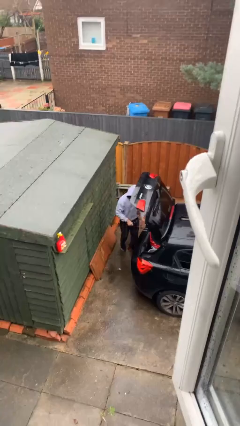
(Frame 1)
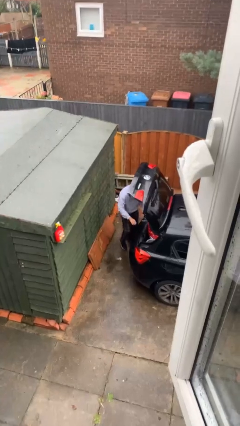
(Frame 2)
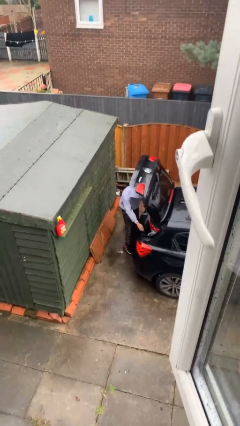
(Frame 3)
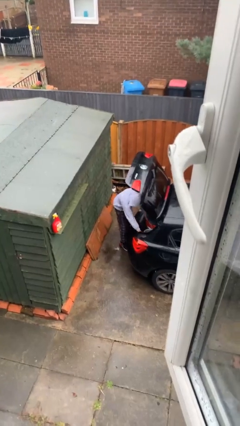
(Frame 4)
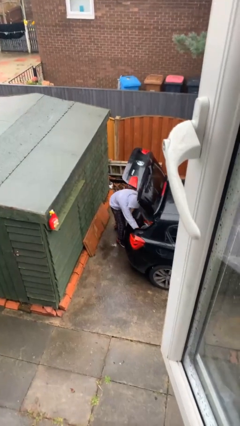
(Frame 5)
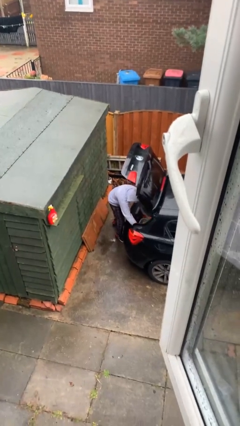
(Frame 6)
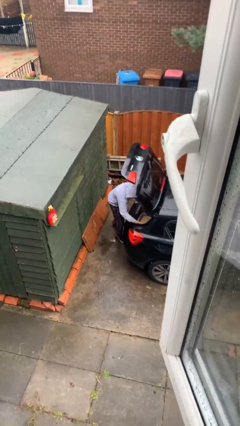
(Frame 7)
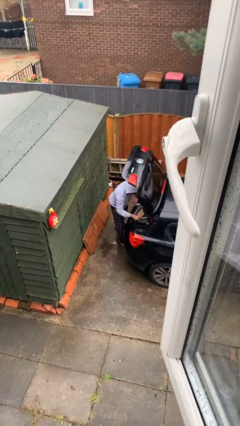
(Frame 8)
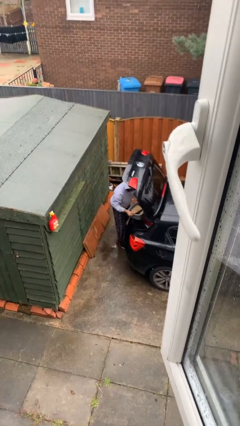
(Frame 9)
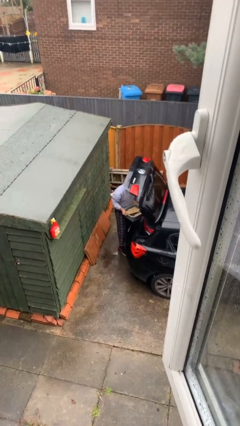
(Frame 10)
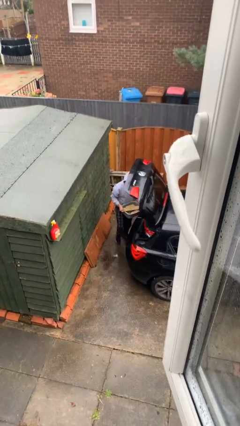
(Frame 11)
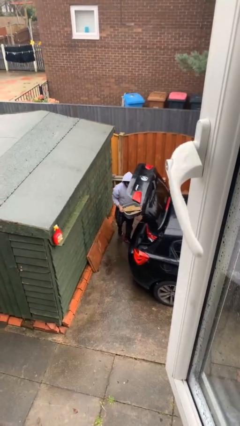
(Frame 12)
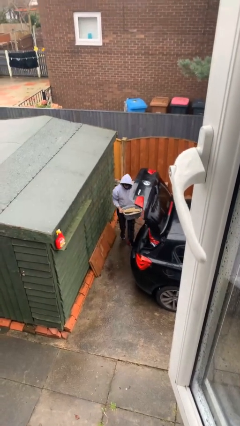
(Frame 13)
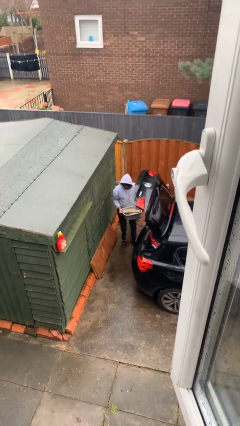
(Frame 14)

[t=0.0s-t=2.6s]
person unloads car

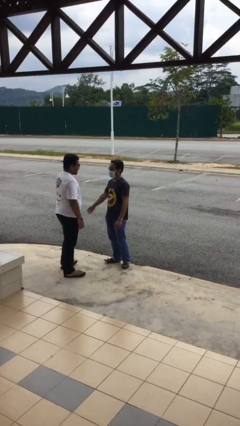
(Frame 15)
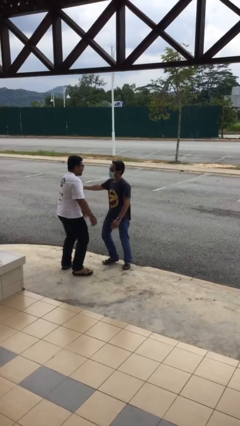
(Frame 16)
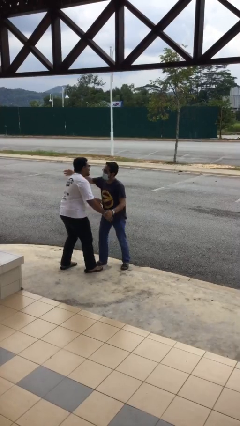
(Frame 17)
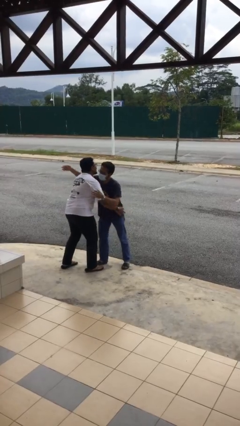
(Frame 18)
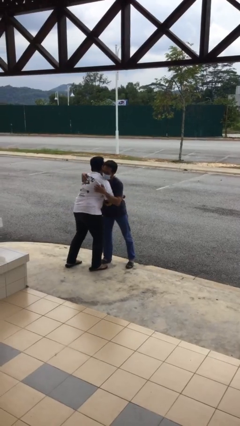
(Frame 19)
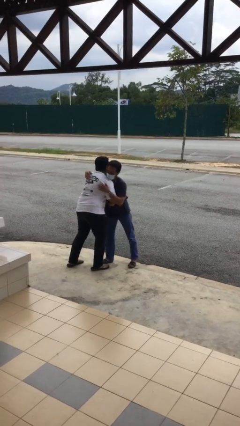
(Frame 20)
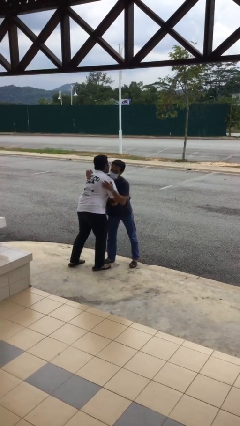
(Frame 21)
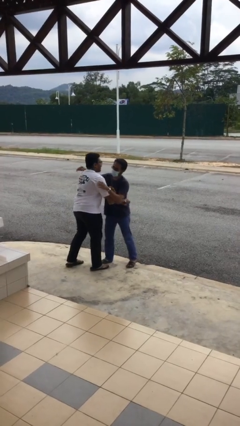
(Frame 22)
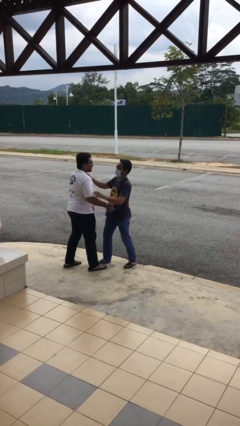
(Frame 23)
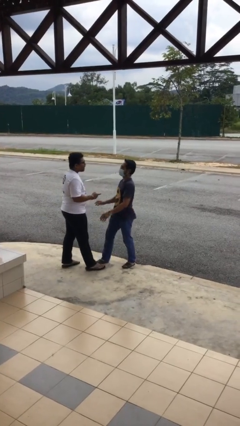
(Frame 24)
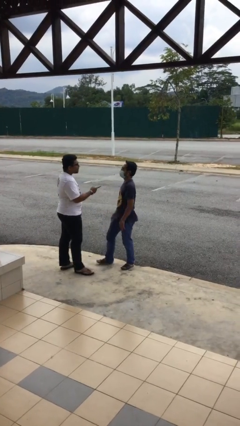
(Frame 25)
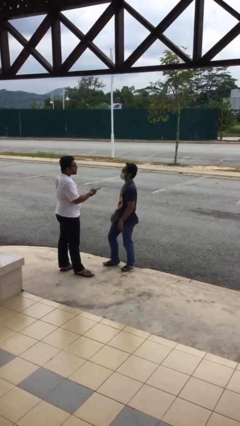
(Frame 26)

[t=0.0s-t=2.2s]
person embraces person

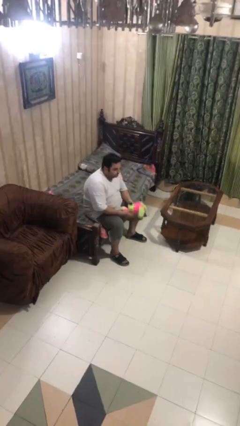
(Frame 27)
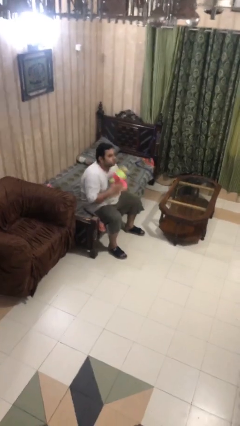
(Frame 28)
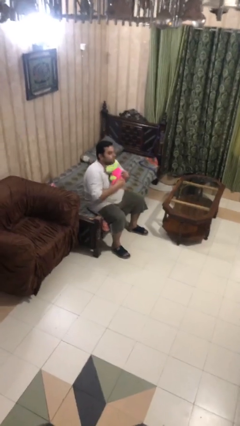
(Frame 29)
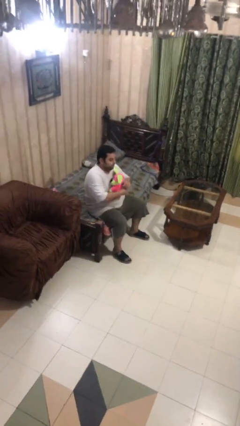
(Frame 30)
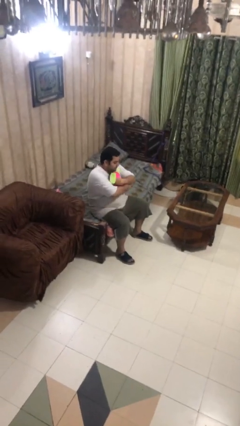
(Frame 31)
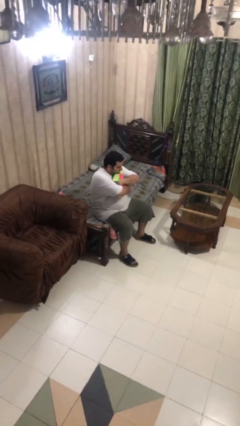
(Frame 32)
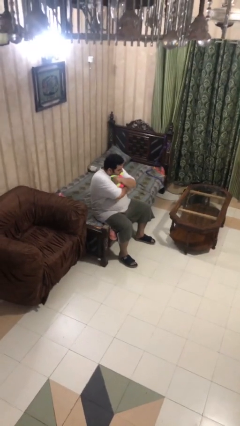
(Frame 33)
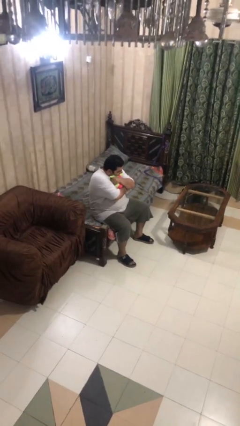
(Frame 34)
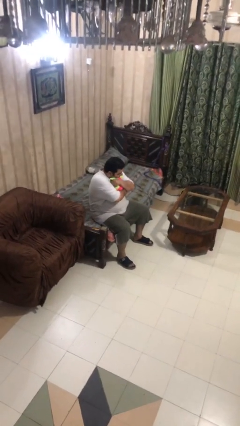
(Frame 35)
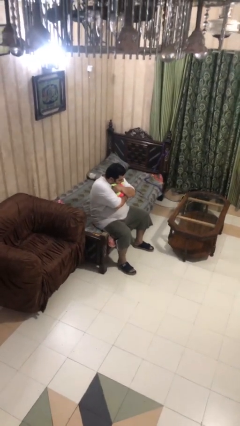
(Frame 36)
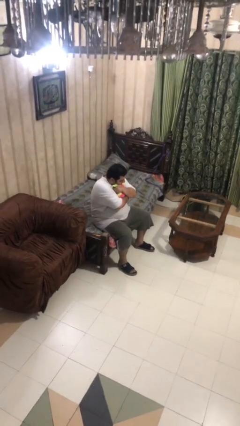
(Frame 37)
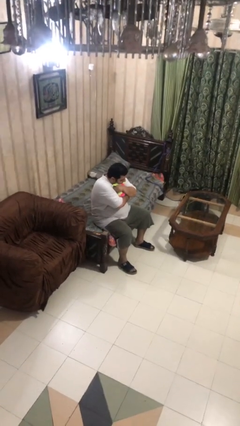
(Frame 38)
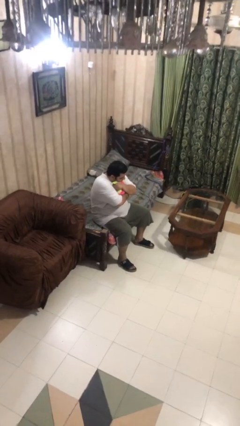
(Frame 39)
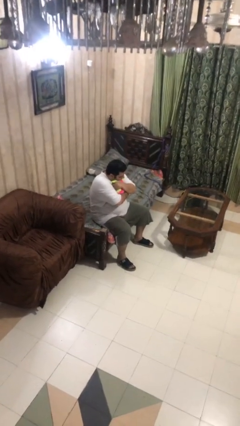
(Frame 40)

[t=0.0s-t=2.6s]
person hugs stuffed animal

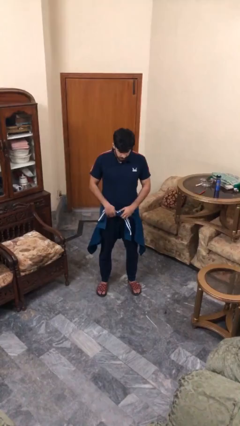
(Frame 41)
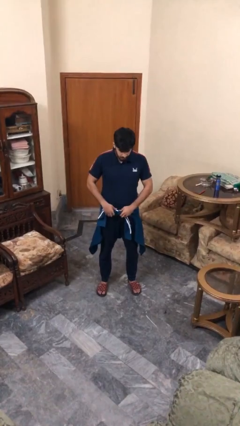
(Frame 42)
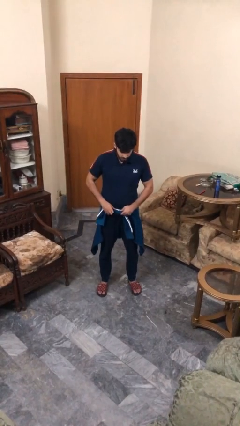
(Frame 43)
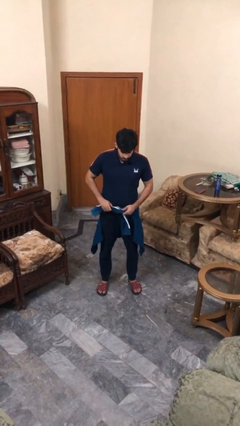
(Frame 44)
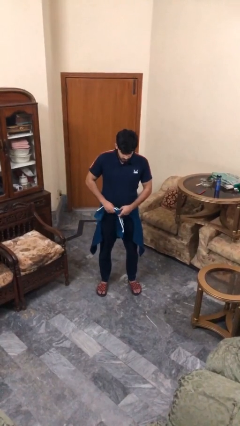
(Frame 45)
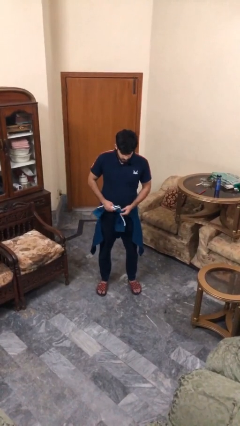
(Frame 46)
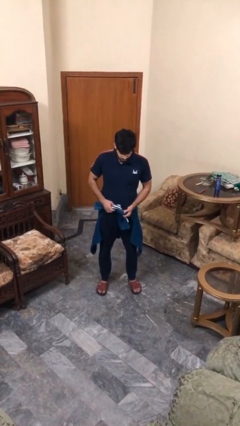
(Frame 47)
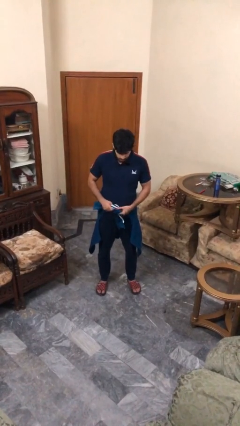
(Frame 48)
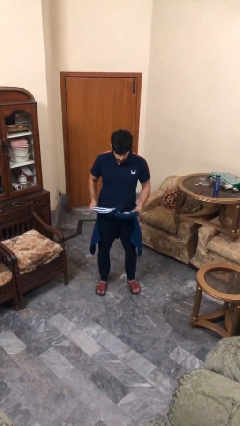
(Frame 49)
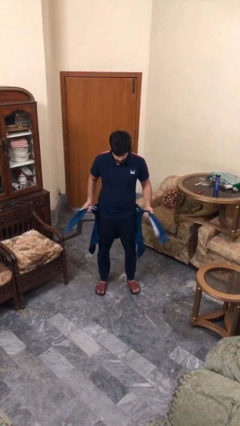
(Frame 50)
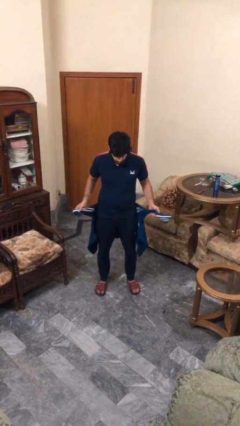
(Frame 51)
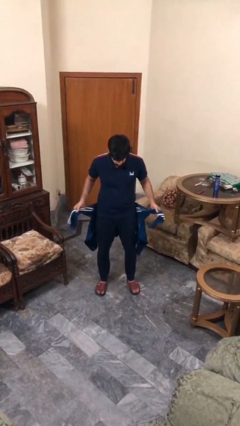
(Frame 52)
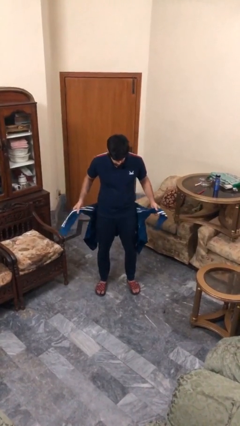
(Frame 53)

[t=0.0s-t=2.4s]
person unties jacket around waist

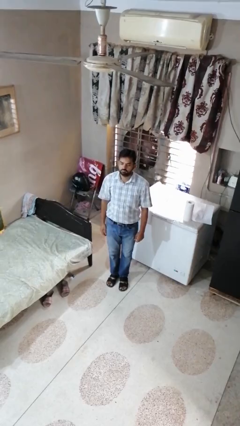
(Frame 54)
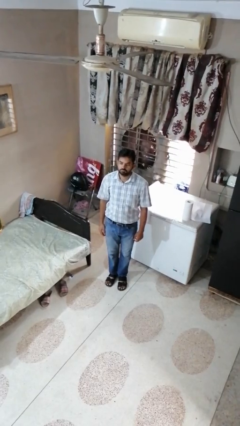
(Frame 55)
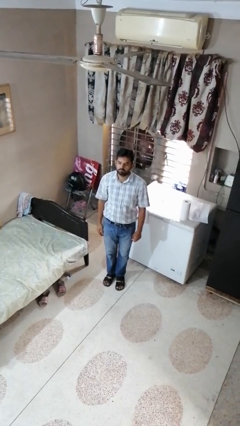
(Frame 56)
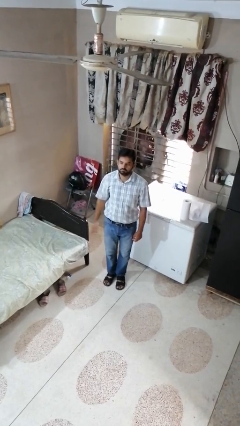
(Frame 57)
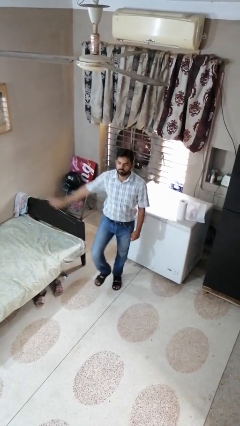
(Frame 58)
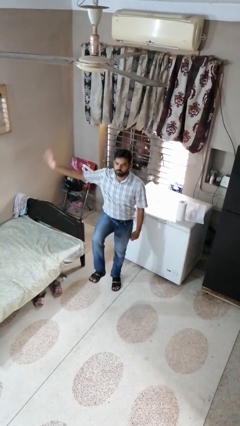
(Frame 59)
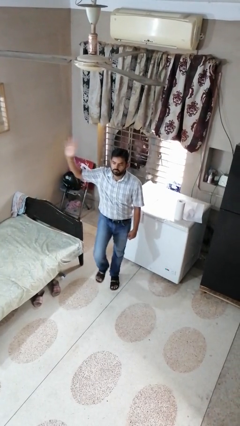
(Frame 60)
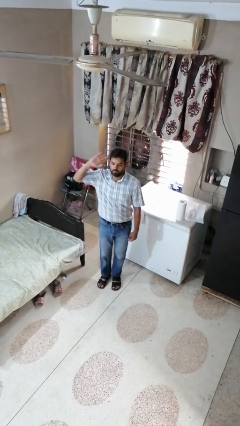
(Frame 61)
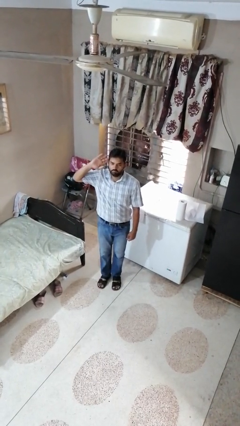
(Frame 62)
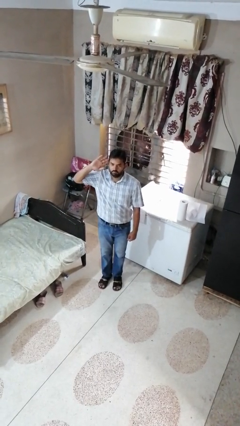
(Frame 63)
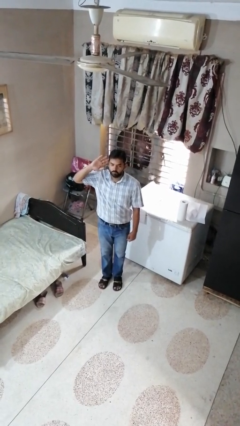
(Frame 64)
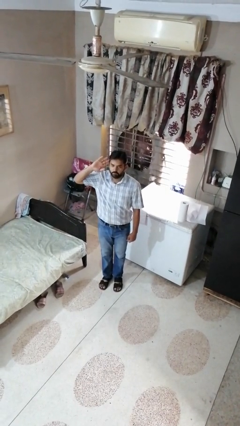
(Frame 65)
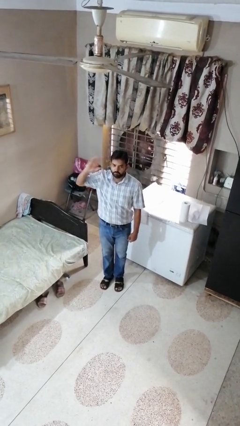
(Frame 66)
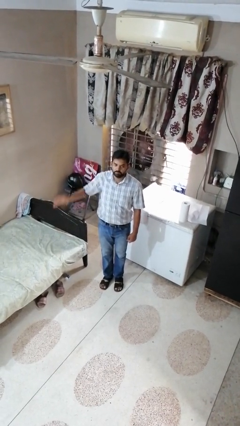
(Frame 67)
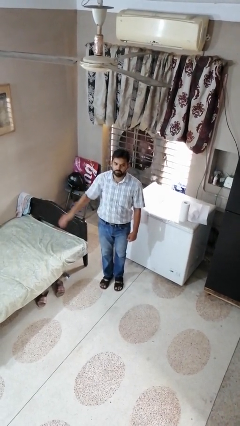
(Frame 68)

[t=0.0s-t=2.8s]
person salutes

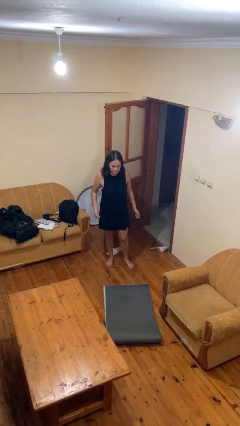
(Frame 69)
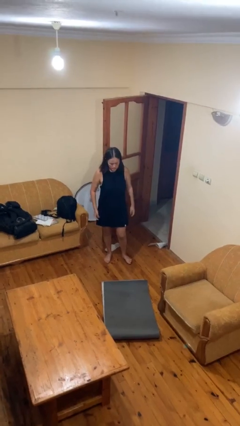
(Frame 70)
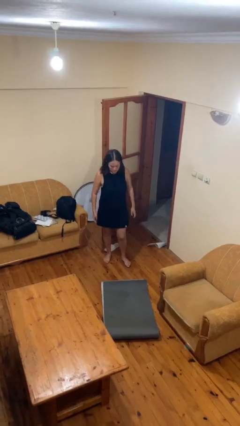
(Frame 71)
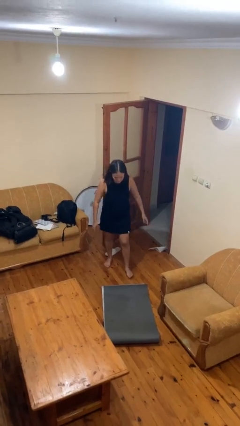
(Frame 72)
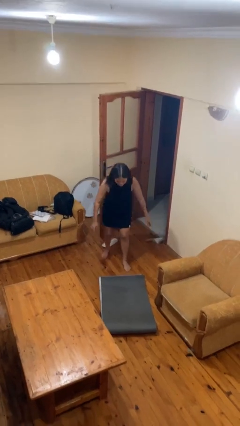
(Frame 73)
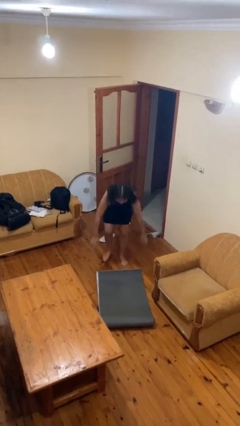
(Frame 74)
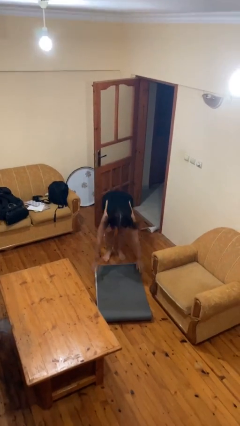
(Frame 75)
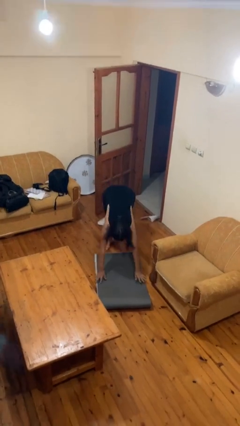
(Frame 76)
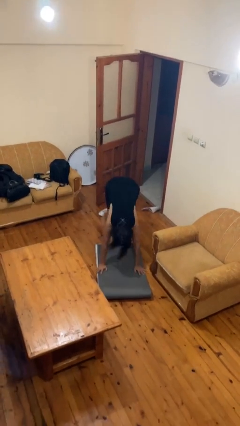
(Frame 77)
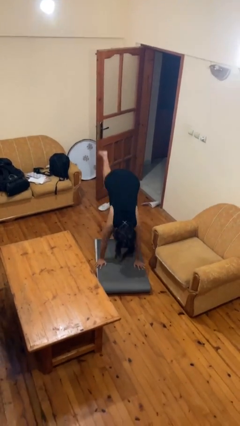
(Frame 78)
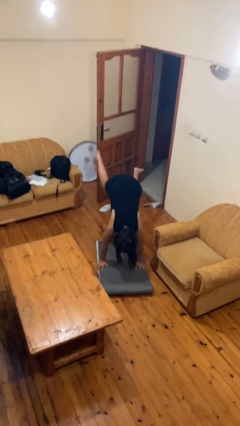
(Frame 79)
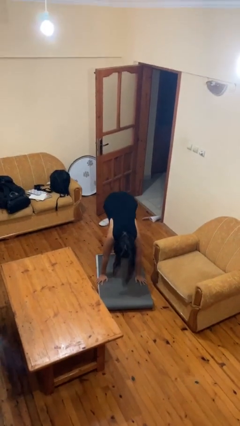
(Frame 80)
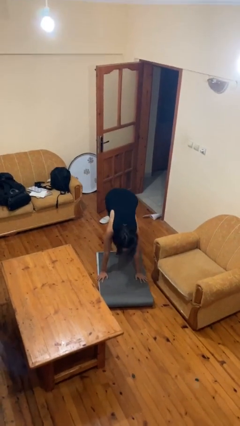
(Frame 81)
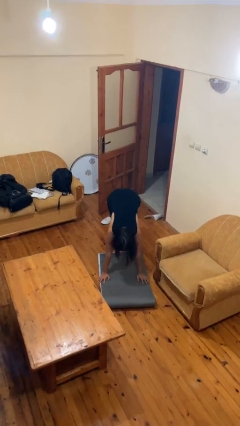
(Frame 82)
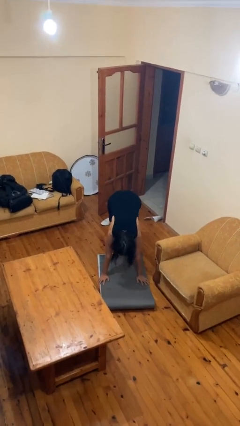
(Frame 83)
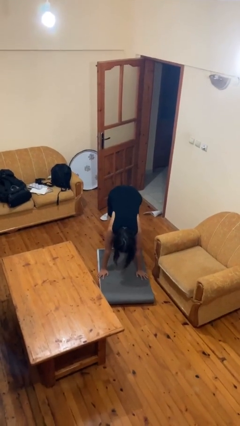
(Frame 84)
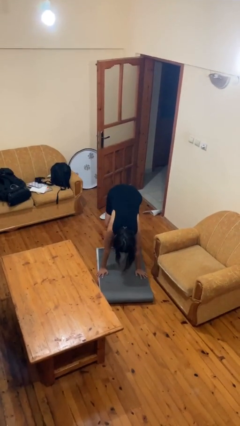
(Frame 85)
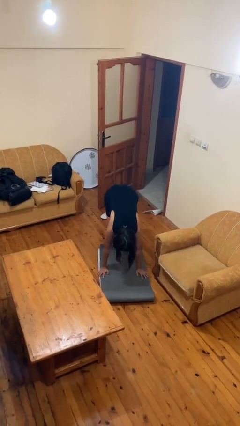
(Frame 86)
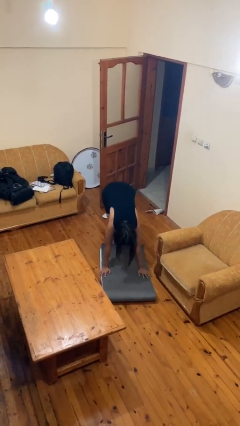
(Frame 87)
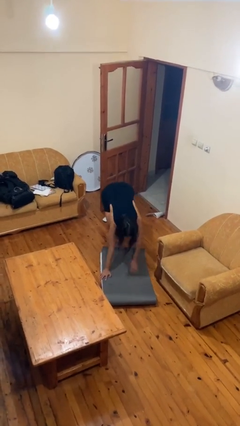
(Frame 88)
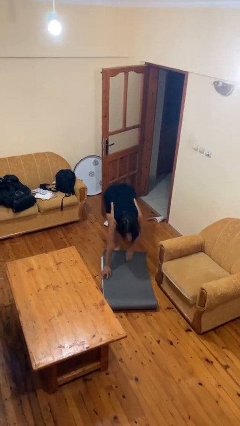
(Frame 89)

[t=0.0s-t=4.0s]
person handstand

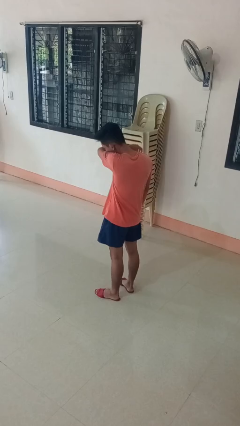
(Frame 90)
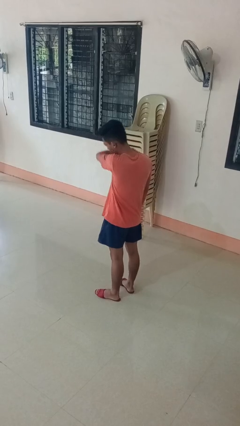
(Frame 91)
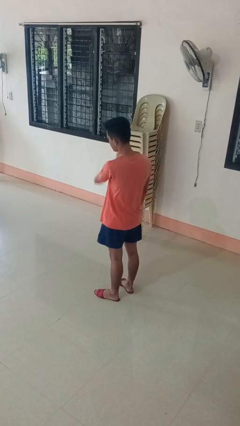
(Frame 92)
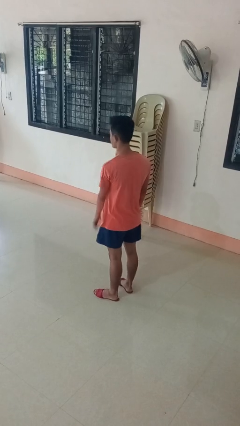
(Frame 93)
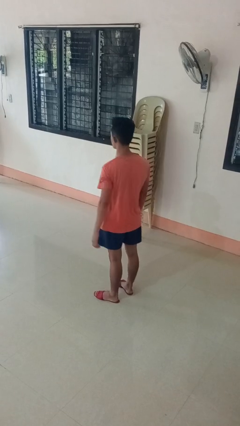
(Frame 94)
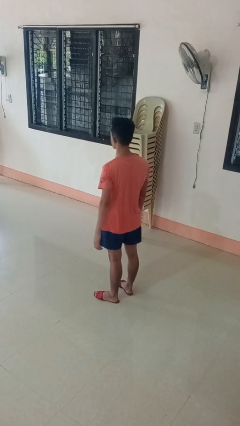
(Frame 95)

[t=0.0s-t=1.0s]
person sneezes into arm
